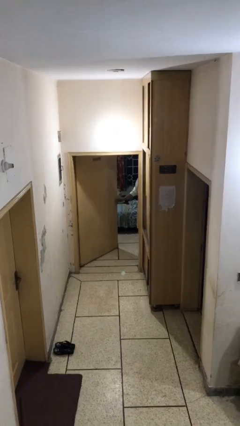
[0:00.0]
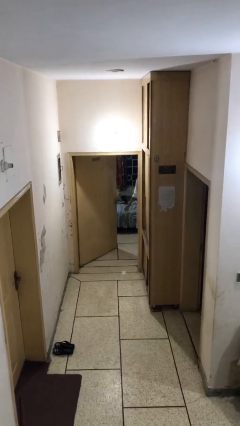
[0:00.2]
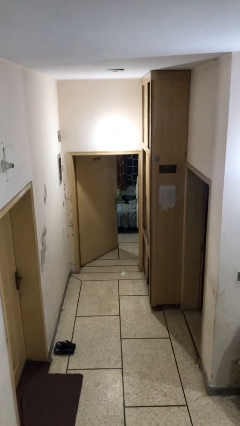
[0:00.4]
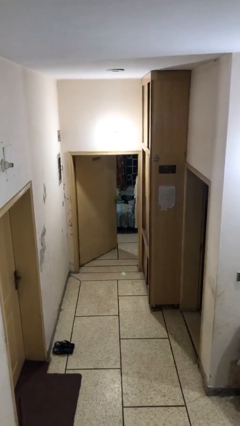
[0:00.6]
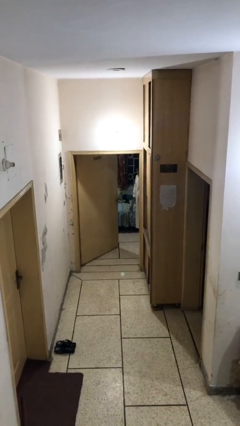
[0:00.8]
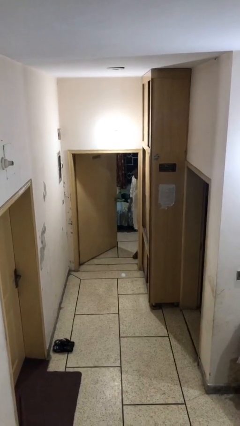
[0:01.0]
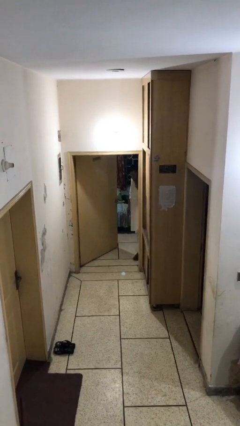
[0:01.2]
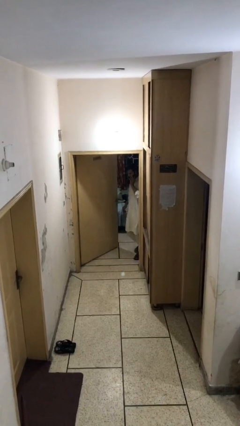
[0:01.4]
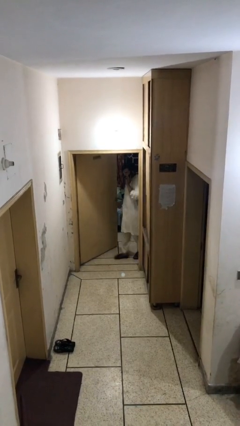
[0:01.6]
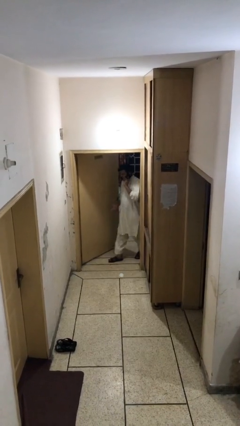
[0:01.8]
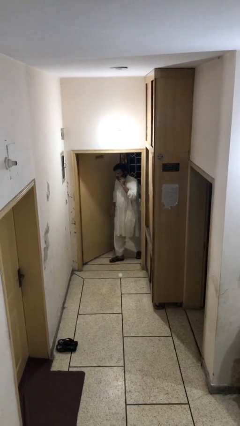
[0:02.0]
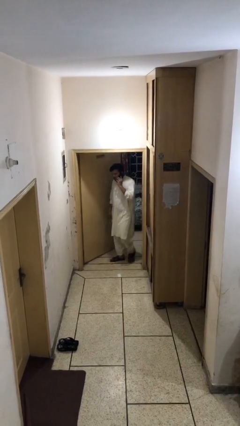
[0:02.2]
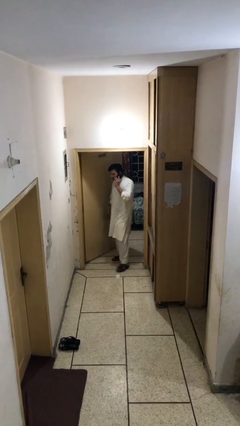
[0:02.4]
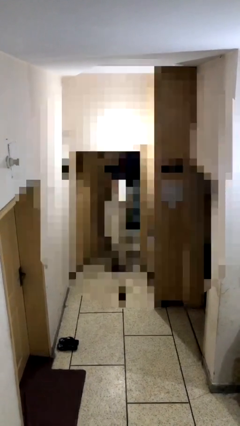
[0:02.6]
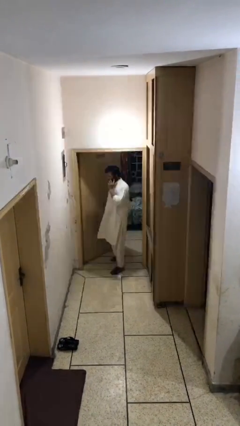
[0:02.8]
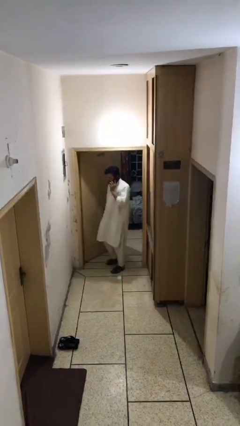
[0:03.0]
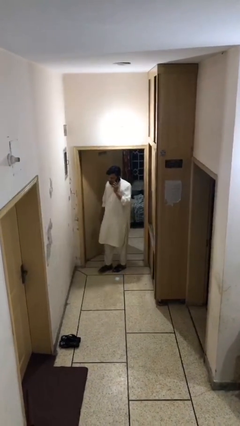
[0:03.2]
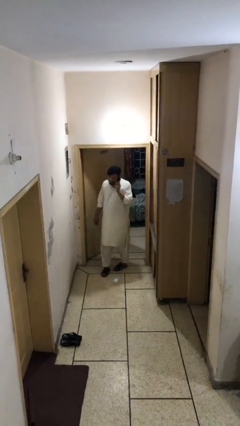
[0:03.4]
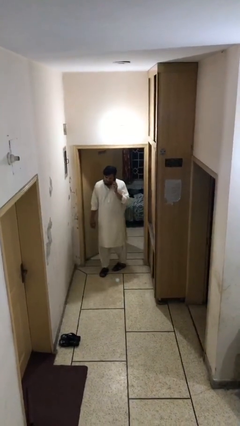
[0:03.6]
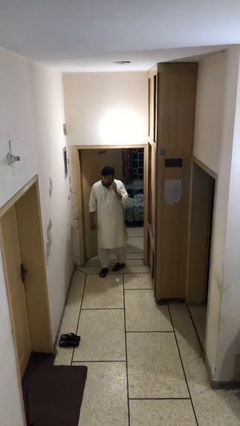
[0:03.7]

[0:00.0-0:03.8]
person enters scene through structure

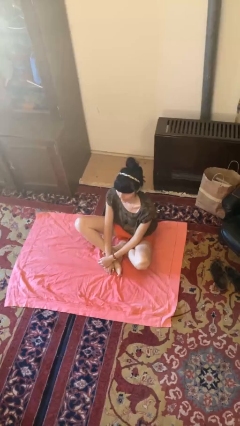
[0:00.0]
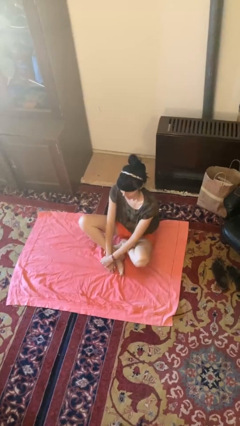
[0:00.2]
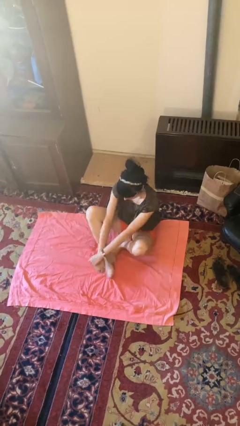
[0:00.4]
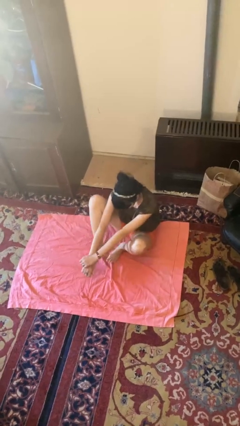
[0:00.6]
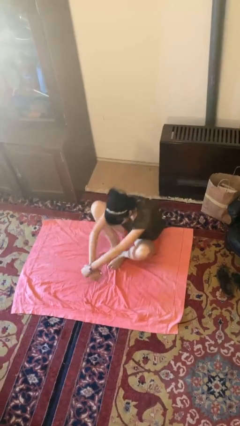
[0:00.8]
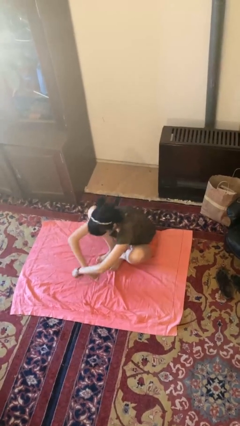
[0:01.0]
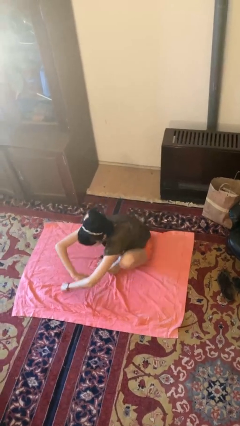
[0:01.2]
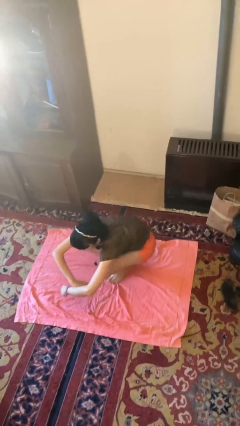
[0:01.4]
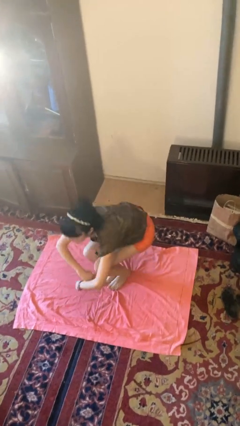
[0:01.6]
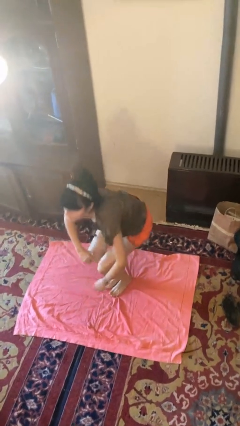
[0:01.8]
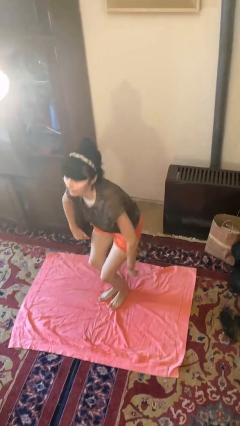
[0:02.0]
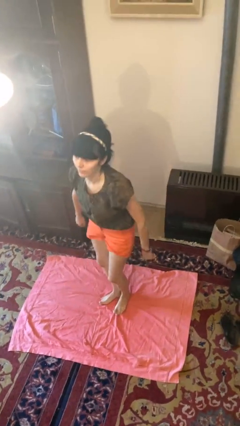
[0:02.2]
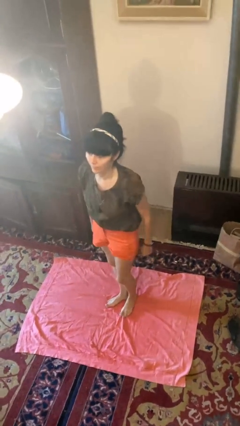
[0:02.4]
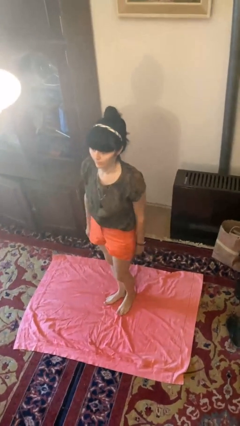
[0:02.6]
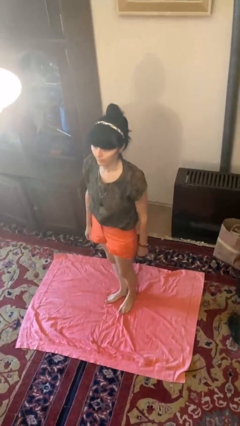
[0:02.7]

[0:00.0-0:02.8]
person stands up from floor

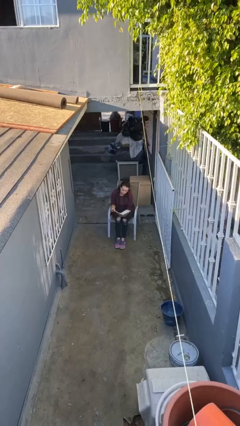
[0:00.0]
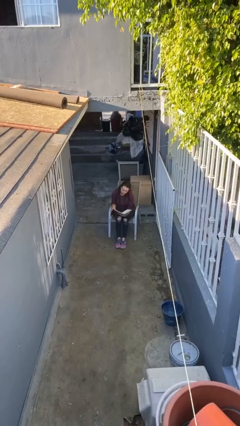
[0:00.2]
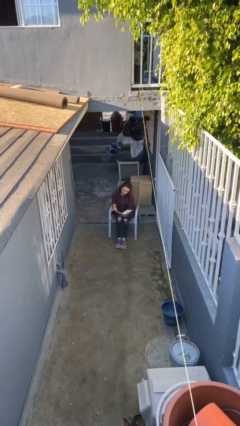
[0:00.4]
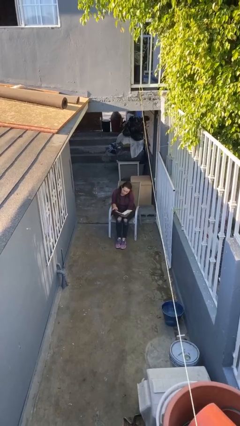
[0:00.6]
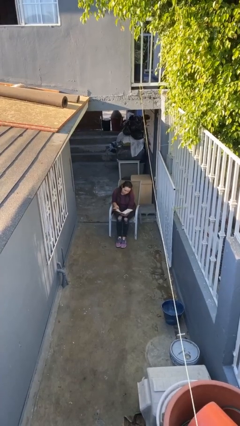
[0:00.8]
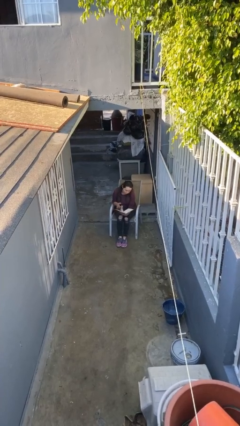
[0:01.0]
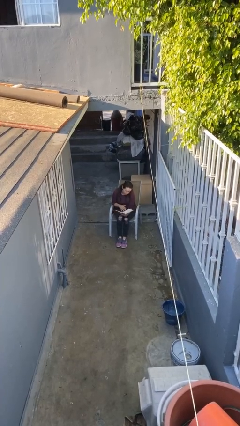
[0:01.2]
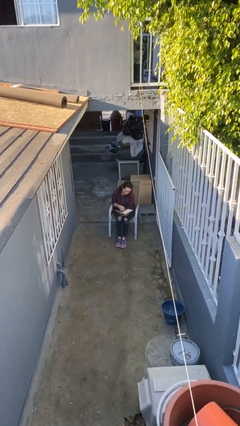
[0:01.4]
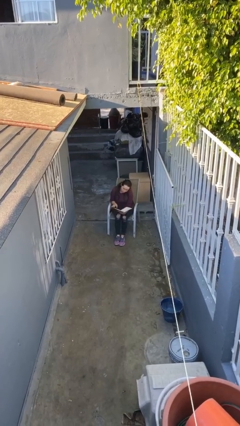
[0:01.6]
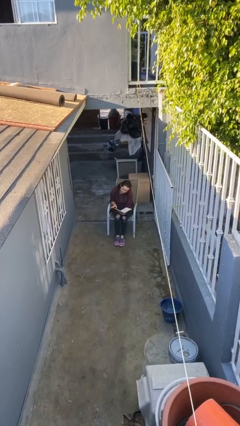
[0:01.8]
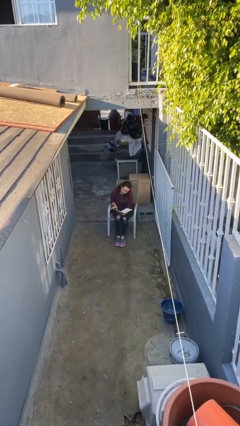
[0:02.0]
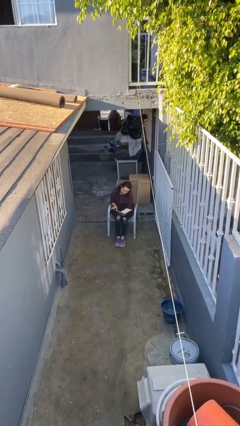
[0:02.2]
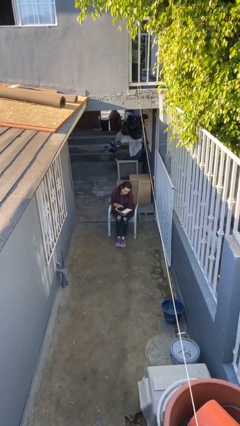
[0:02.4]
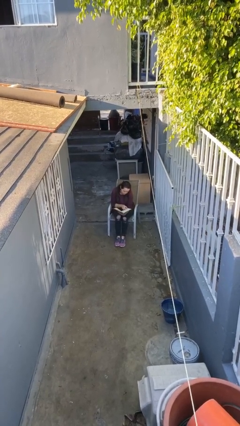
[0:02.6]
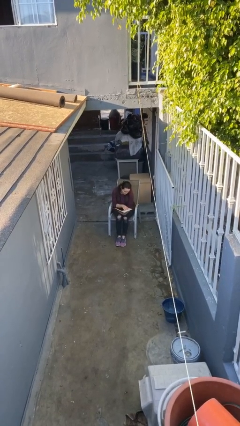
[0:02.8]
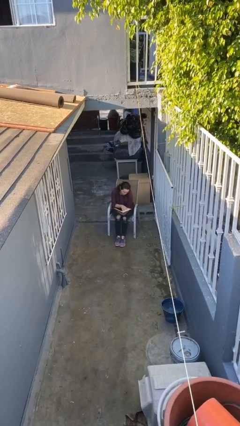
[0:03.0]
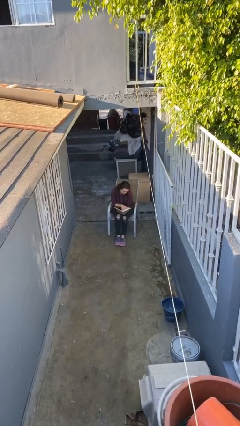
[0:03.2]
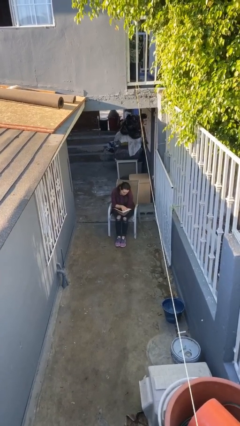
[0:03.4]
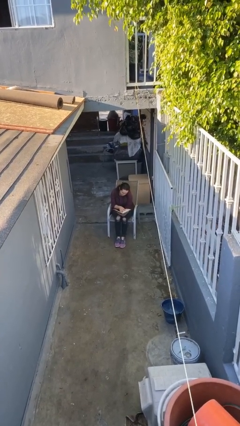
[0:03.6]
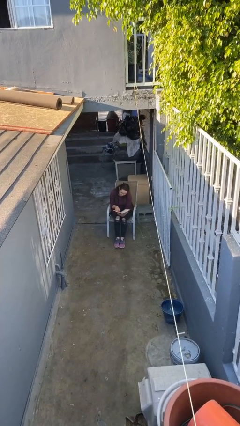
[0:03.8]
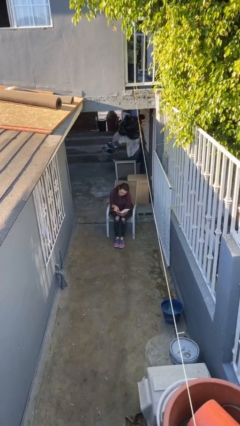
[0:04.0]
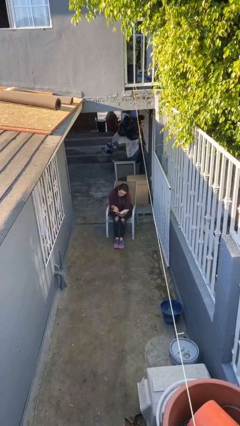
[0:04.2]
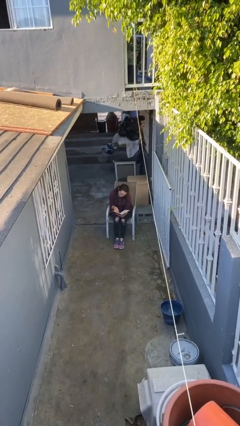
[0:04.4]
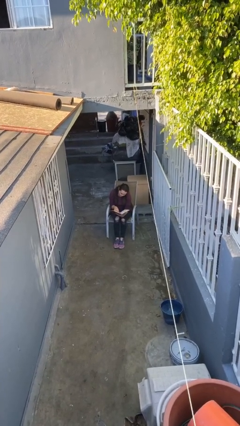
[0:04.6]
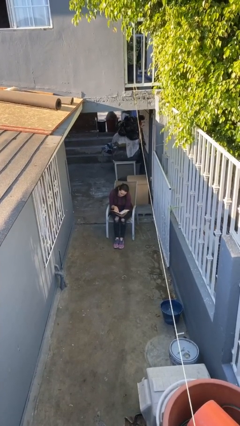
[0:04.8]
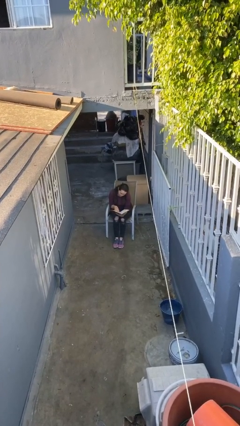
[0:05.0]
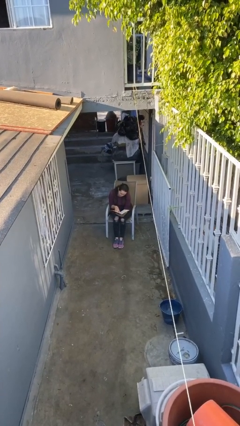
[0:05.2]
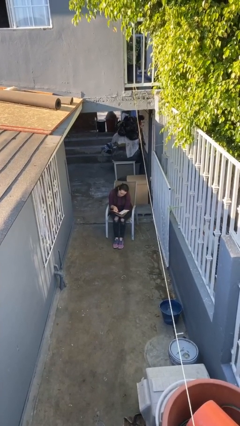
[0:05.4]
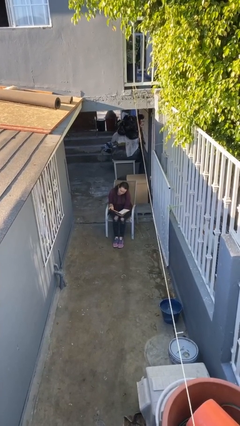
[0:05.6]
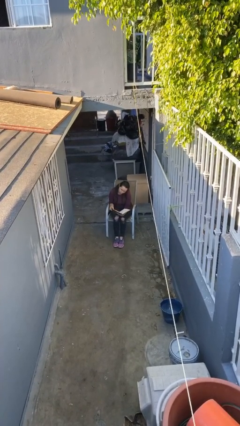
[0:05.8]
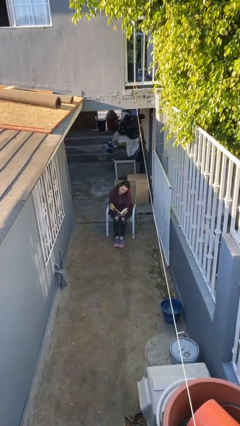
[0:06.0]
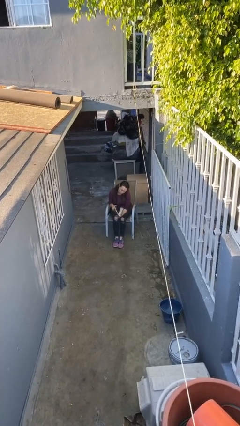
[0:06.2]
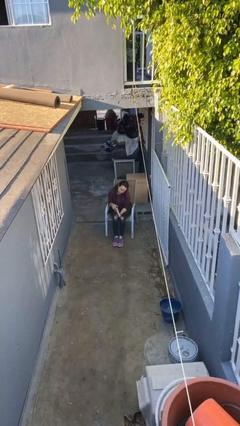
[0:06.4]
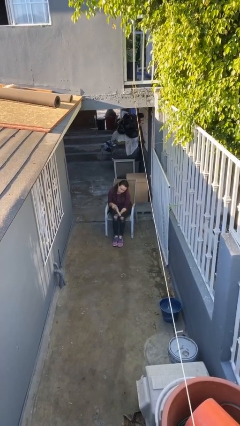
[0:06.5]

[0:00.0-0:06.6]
person reads document

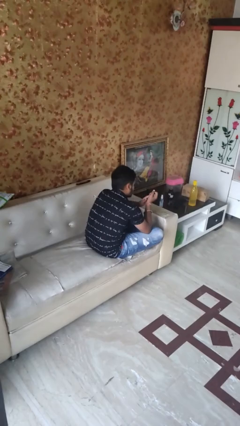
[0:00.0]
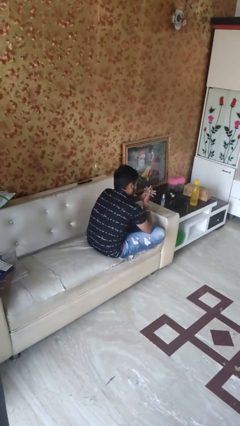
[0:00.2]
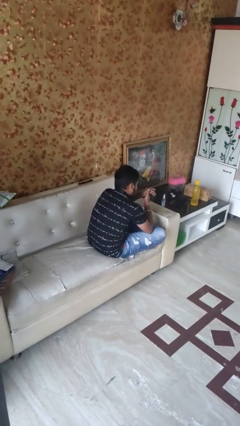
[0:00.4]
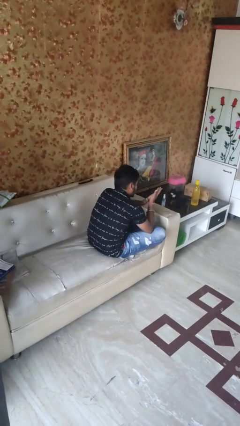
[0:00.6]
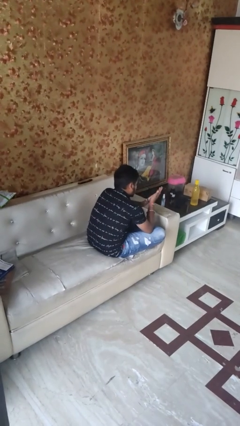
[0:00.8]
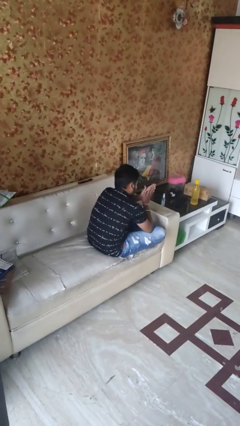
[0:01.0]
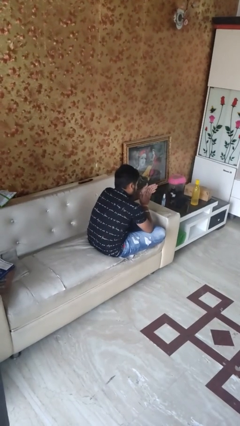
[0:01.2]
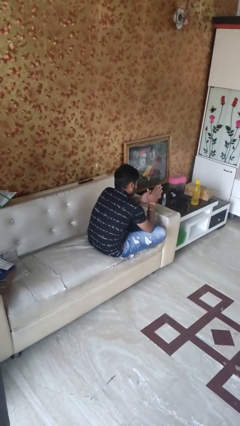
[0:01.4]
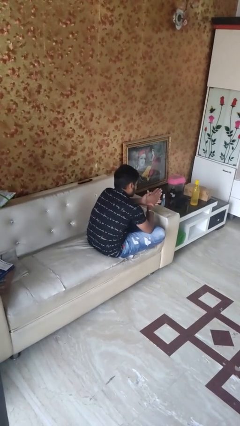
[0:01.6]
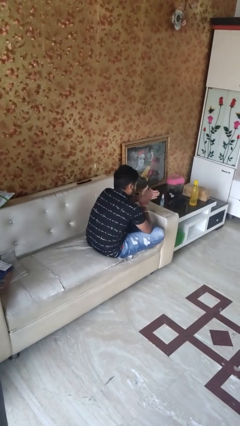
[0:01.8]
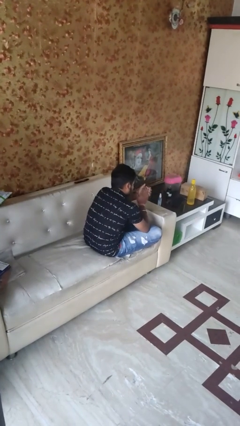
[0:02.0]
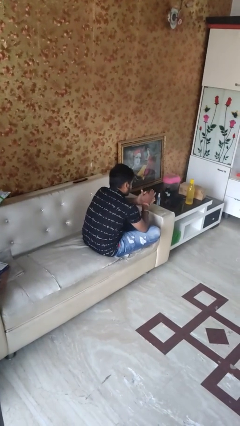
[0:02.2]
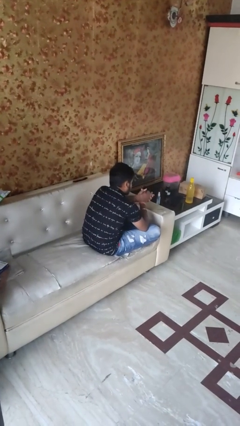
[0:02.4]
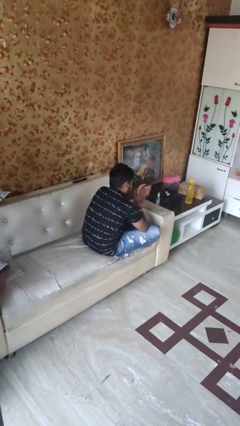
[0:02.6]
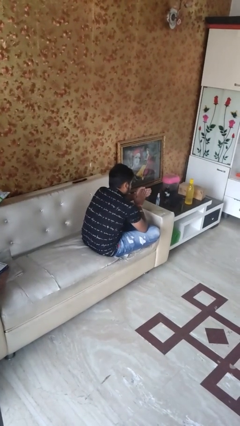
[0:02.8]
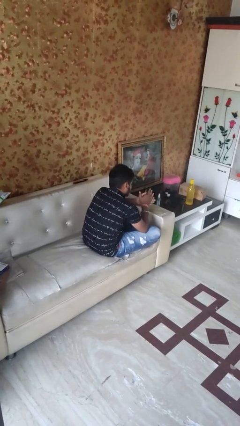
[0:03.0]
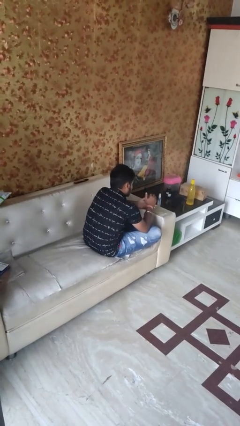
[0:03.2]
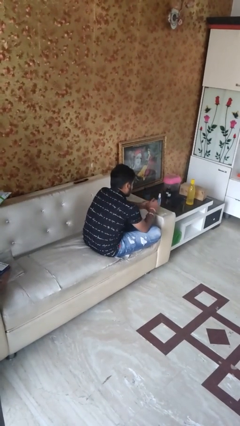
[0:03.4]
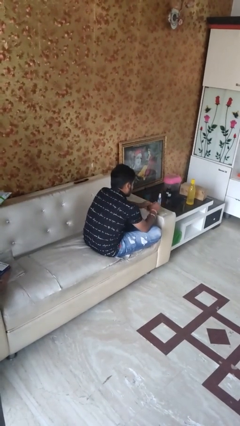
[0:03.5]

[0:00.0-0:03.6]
person looks at hands in lap

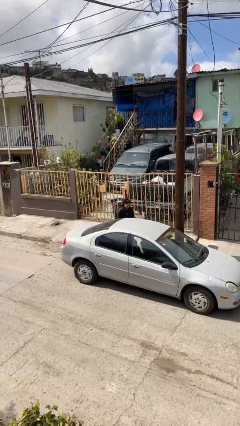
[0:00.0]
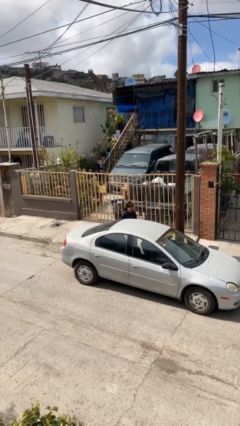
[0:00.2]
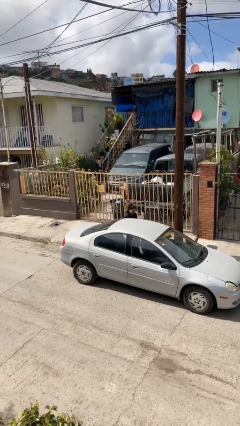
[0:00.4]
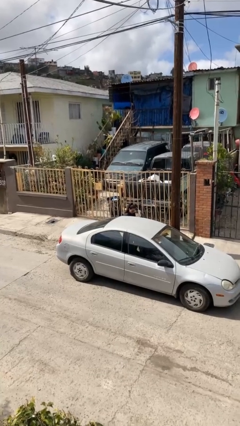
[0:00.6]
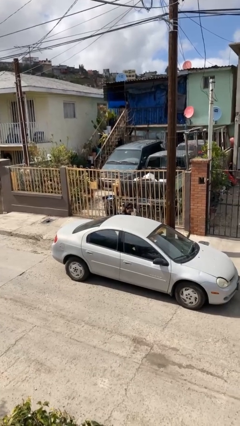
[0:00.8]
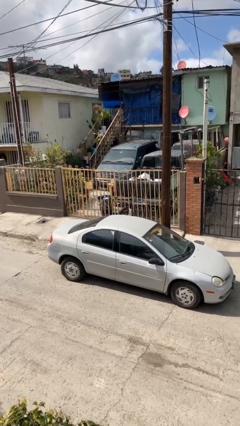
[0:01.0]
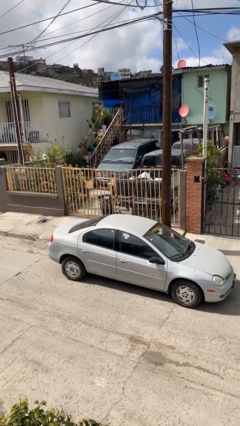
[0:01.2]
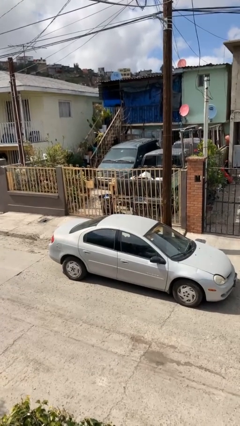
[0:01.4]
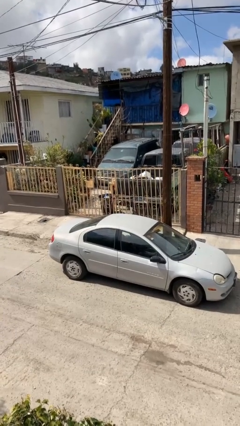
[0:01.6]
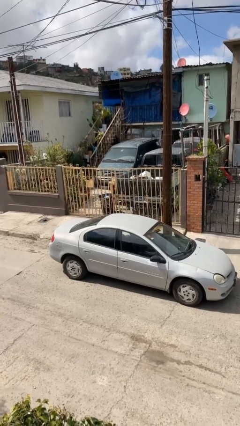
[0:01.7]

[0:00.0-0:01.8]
person enters car
